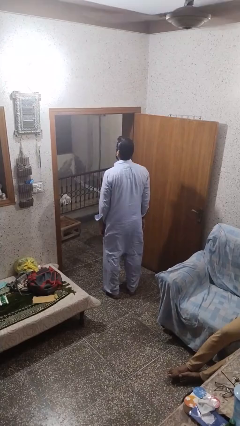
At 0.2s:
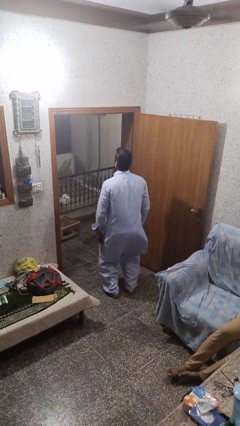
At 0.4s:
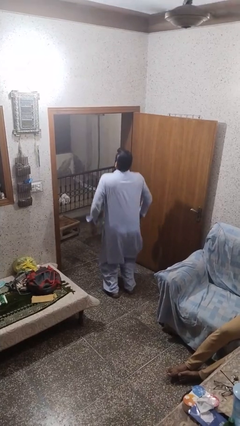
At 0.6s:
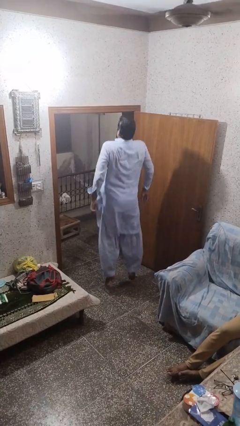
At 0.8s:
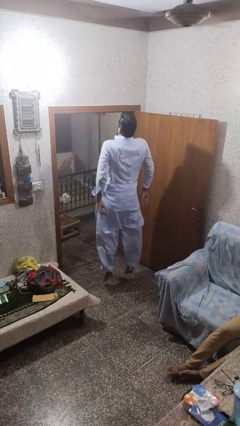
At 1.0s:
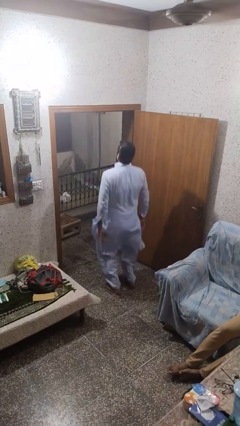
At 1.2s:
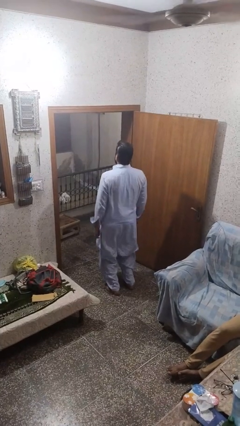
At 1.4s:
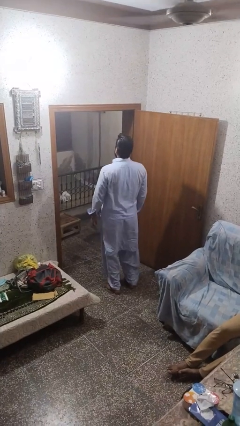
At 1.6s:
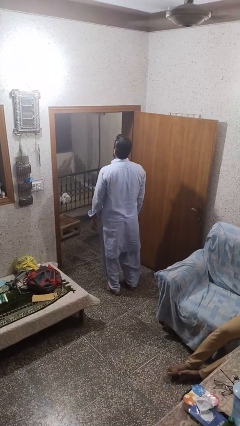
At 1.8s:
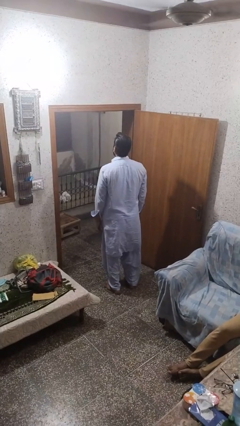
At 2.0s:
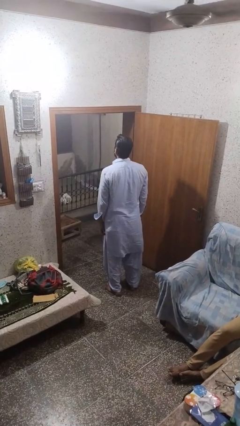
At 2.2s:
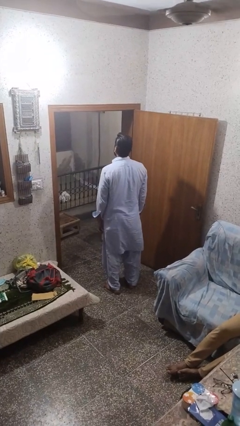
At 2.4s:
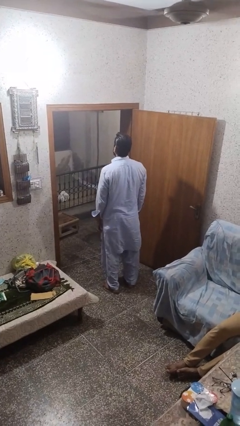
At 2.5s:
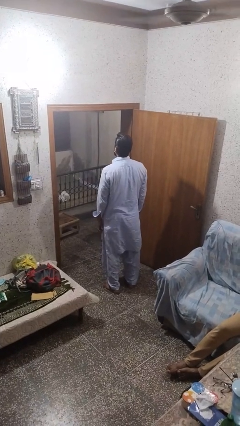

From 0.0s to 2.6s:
person jumps

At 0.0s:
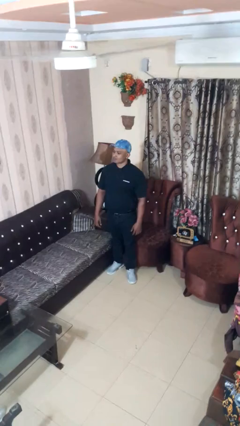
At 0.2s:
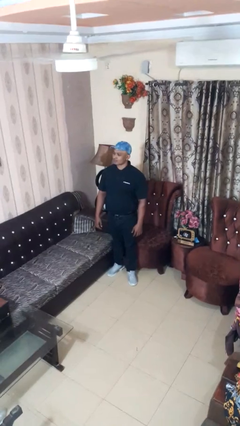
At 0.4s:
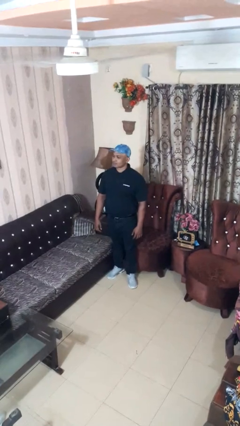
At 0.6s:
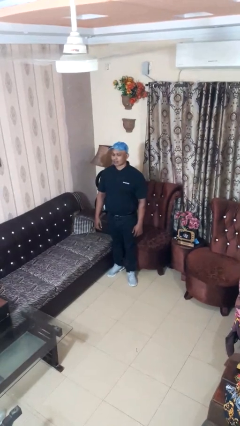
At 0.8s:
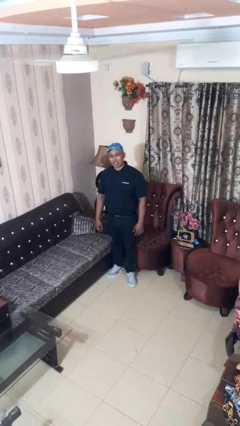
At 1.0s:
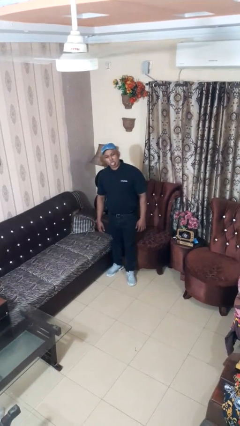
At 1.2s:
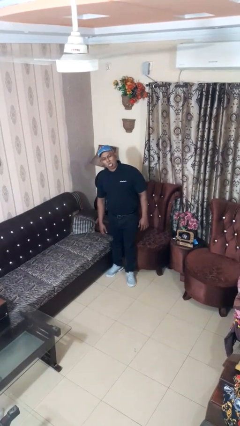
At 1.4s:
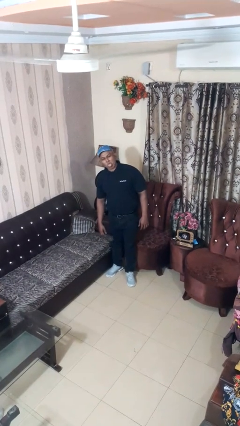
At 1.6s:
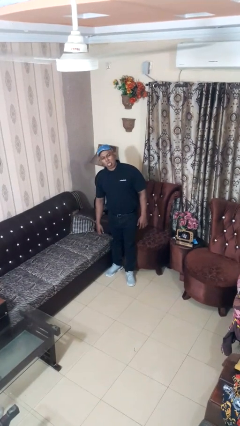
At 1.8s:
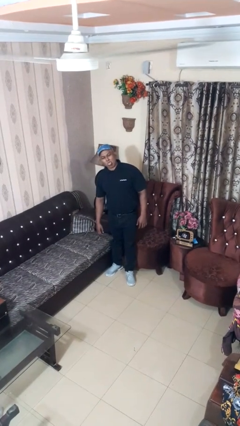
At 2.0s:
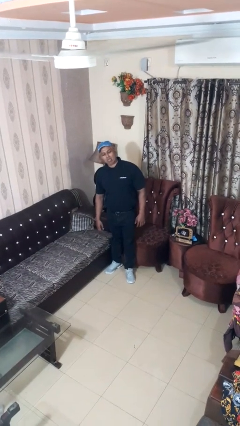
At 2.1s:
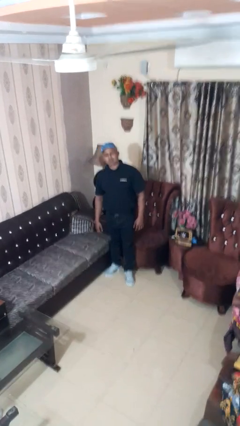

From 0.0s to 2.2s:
person sticks out tongue

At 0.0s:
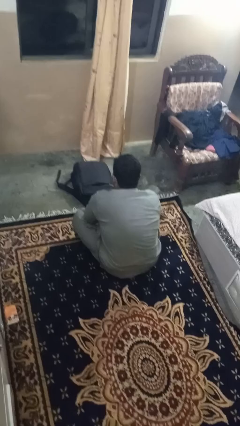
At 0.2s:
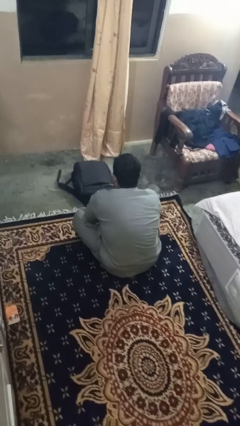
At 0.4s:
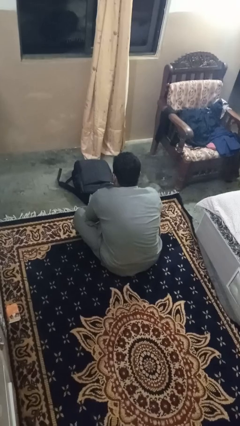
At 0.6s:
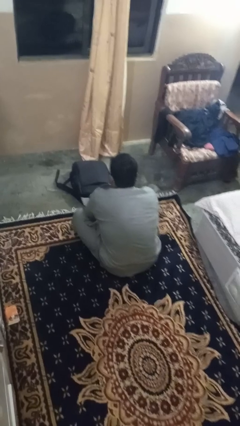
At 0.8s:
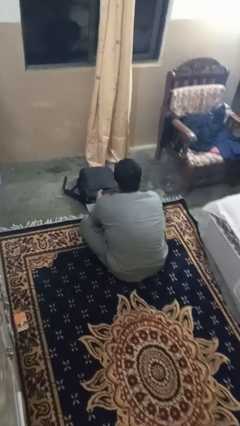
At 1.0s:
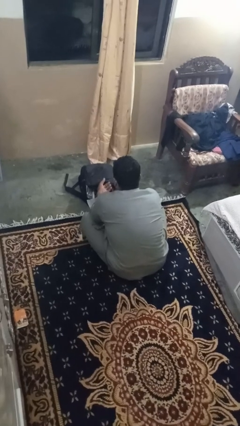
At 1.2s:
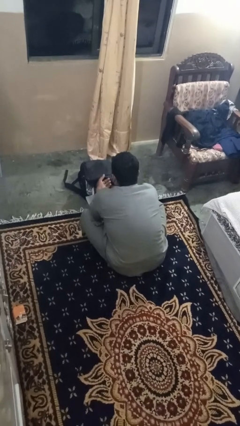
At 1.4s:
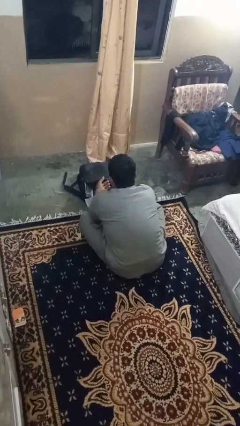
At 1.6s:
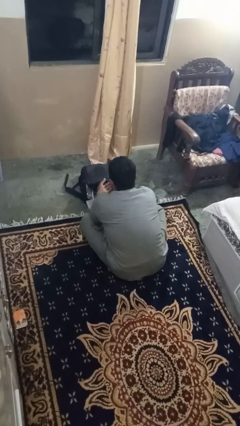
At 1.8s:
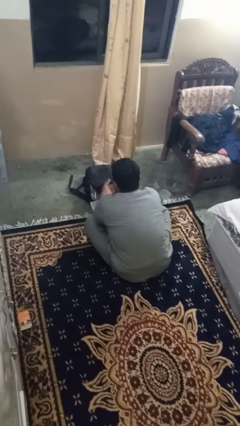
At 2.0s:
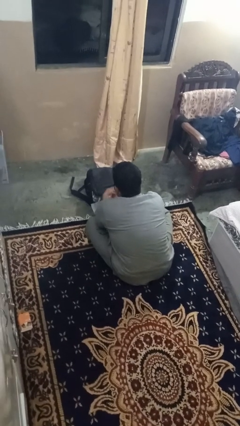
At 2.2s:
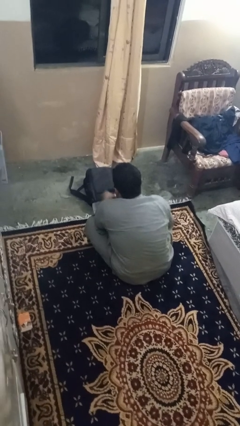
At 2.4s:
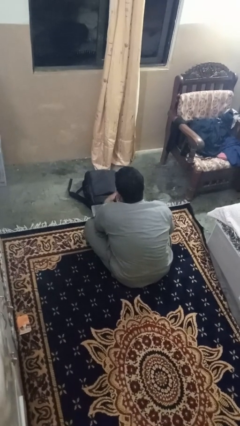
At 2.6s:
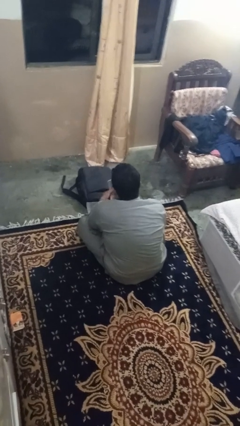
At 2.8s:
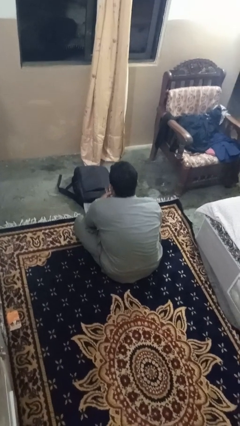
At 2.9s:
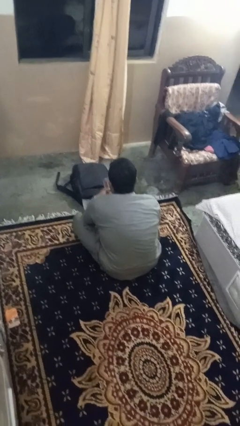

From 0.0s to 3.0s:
person takes object from bag

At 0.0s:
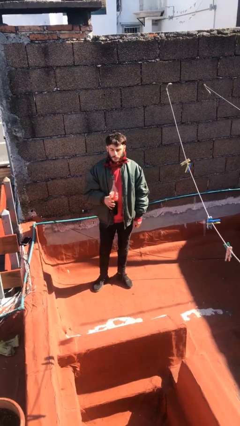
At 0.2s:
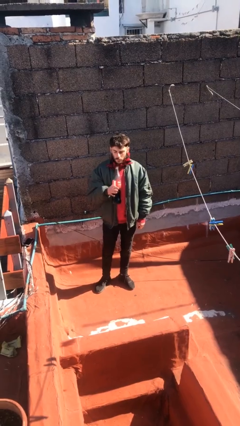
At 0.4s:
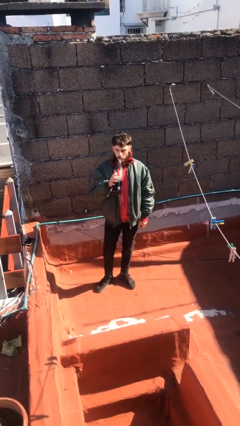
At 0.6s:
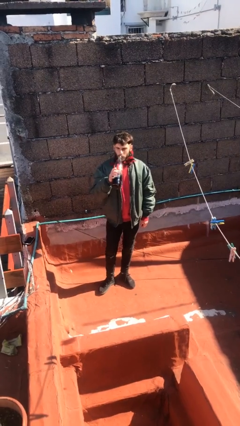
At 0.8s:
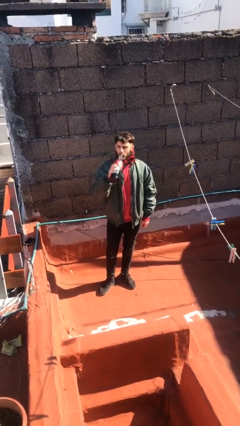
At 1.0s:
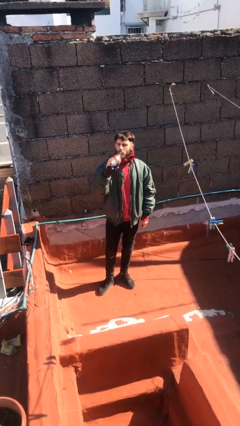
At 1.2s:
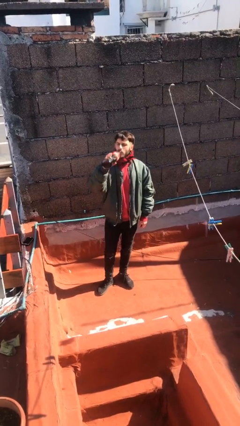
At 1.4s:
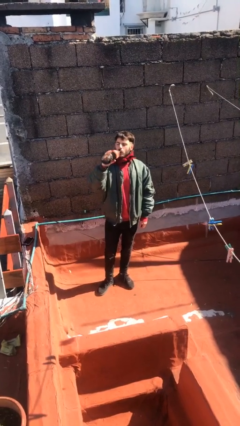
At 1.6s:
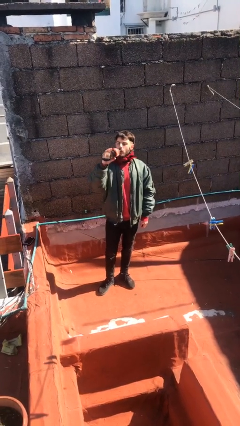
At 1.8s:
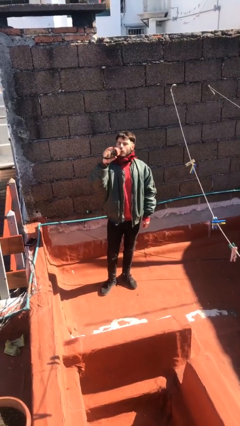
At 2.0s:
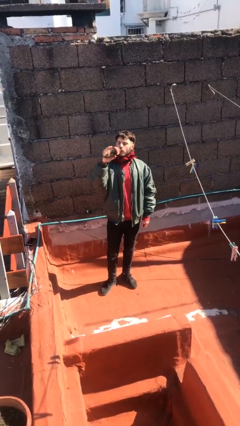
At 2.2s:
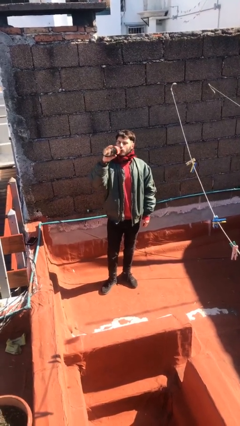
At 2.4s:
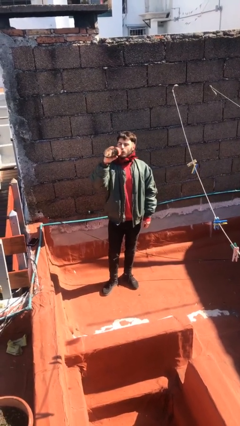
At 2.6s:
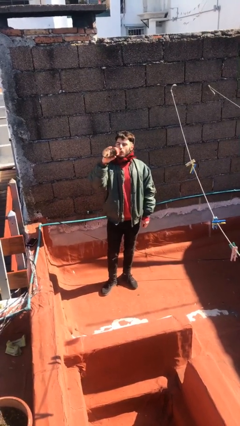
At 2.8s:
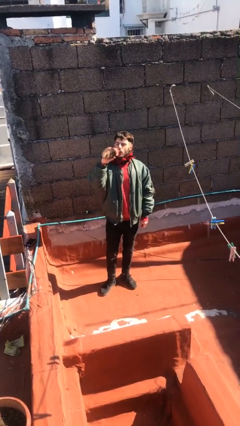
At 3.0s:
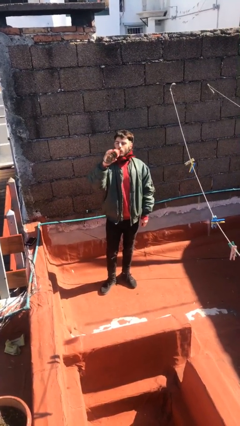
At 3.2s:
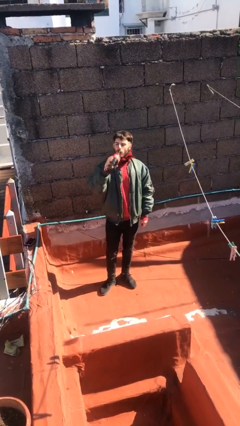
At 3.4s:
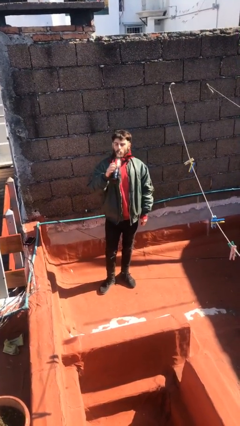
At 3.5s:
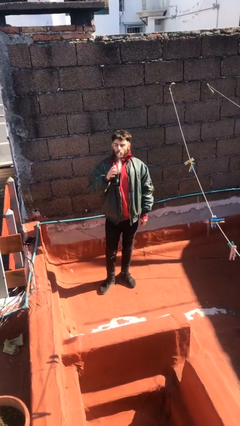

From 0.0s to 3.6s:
person drinks from bottle

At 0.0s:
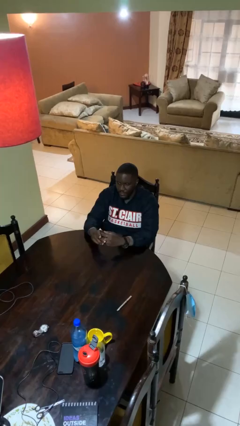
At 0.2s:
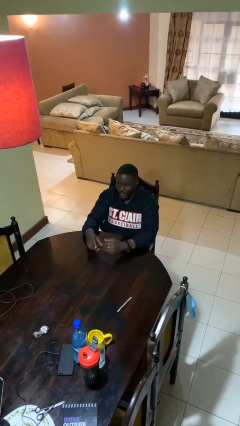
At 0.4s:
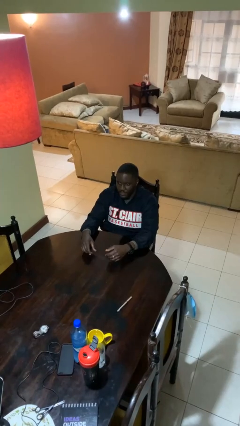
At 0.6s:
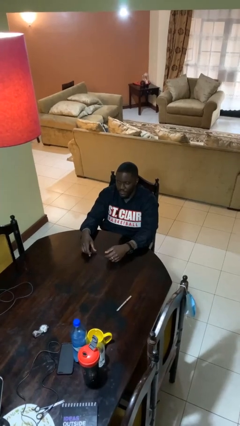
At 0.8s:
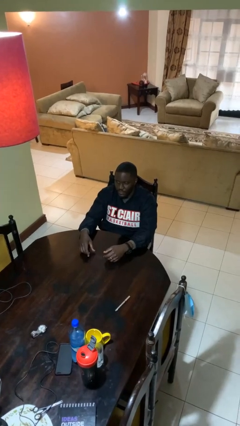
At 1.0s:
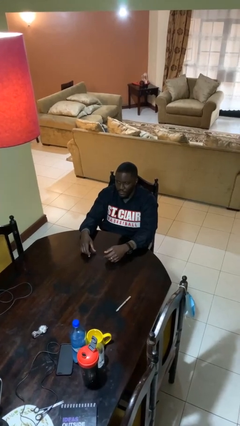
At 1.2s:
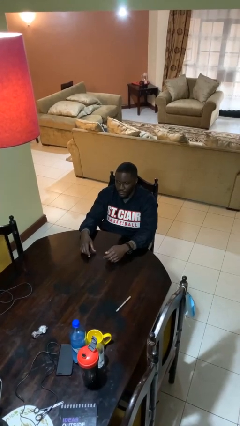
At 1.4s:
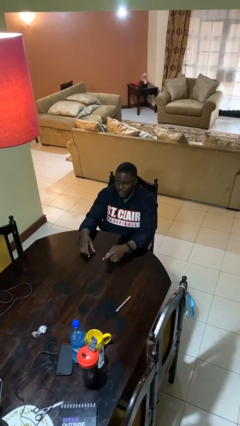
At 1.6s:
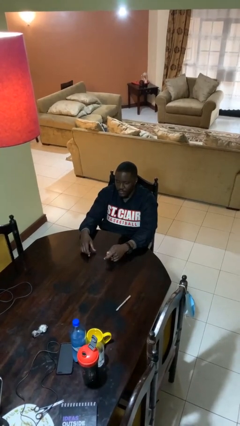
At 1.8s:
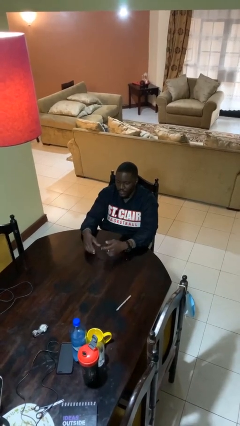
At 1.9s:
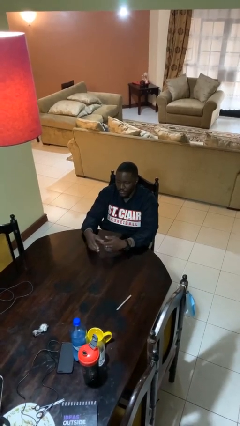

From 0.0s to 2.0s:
person puts on ring

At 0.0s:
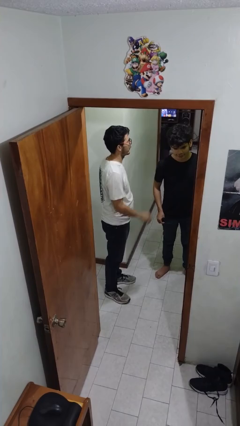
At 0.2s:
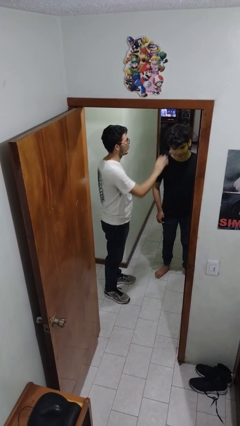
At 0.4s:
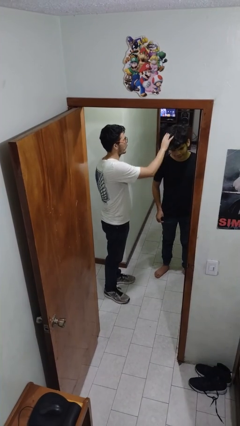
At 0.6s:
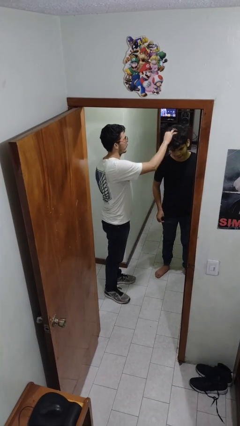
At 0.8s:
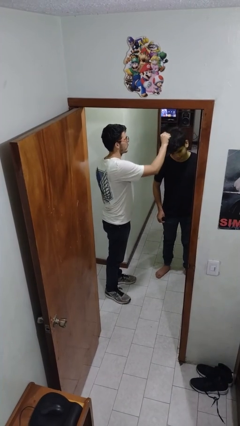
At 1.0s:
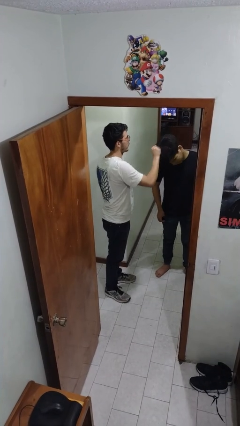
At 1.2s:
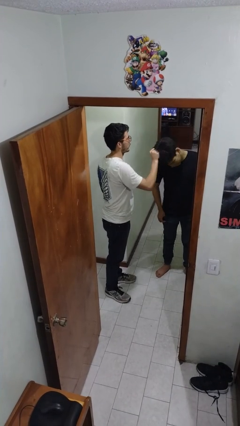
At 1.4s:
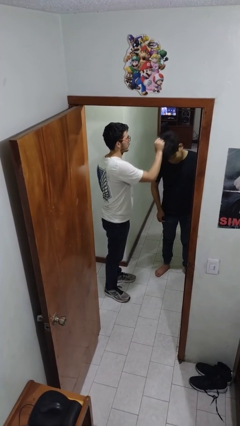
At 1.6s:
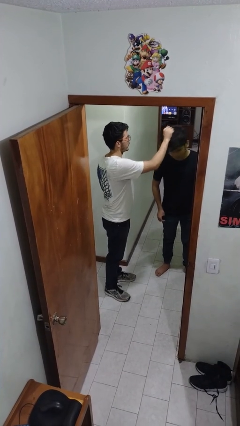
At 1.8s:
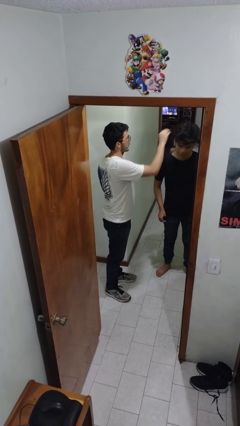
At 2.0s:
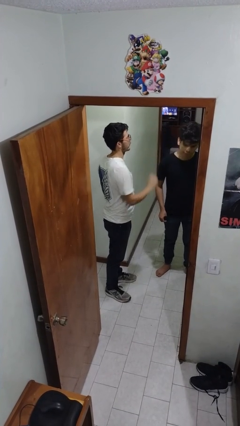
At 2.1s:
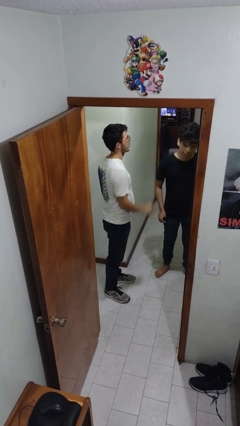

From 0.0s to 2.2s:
person grabs person by hair

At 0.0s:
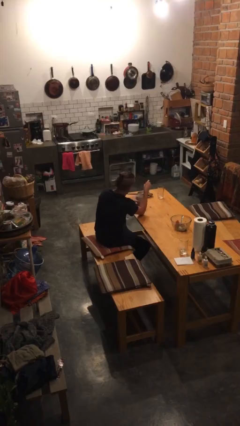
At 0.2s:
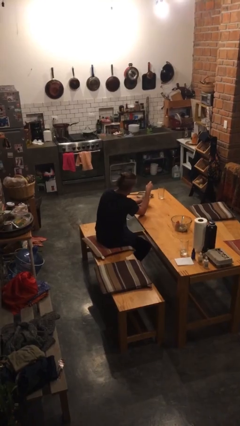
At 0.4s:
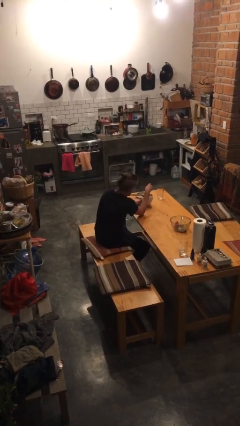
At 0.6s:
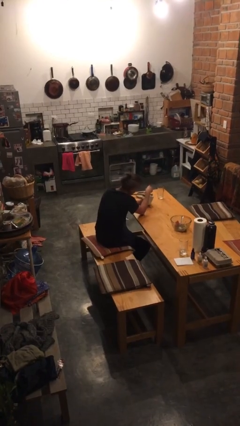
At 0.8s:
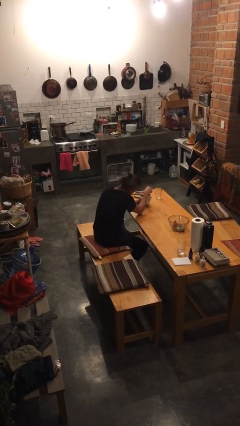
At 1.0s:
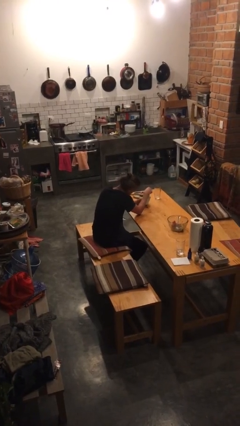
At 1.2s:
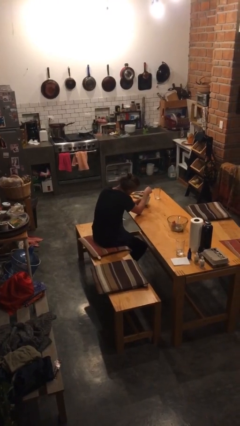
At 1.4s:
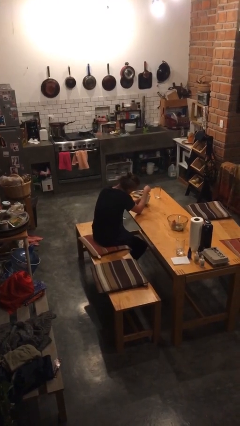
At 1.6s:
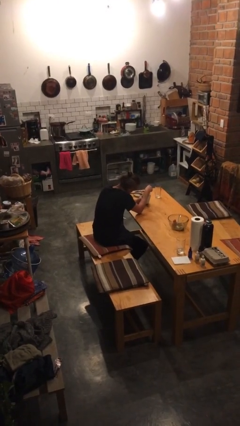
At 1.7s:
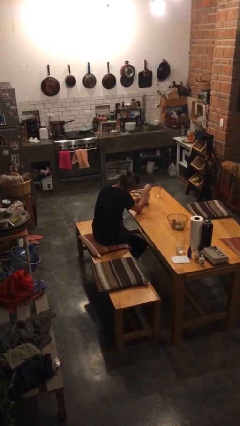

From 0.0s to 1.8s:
person stirs mug
